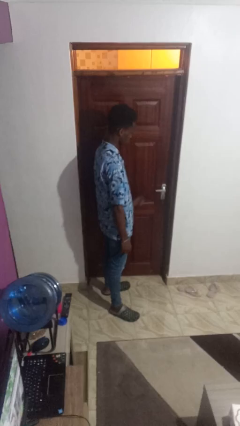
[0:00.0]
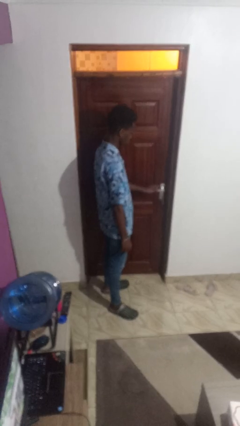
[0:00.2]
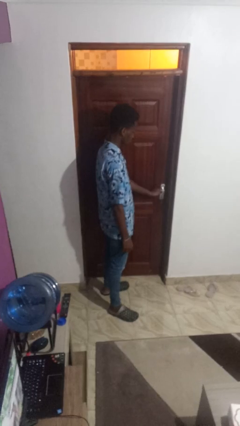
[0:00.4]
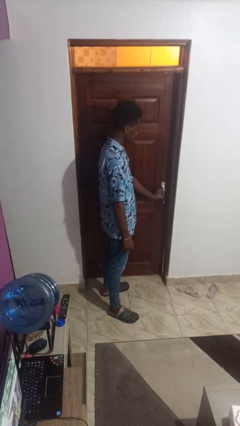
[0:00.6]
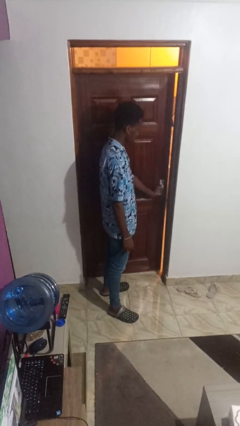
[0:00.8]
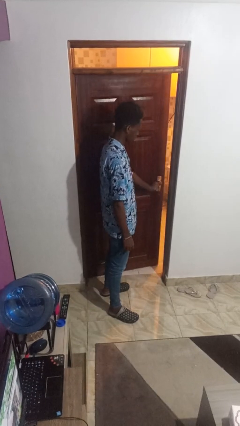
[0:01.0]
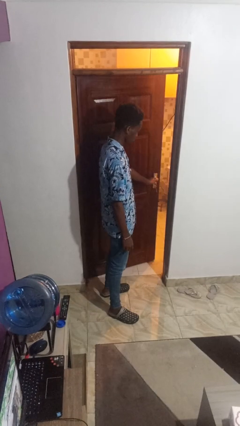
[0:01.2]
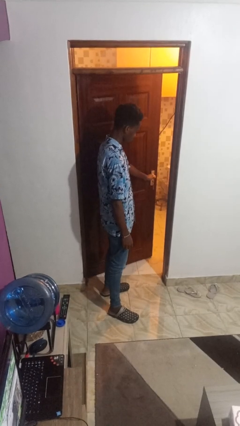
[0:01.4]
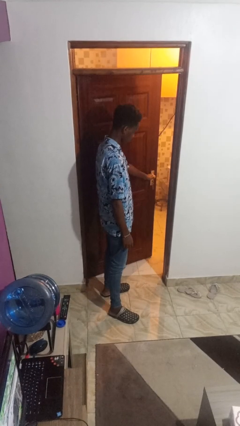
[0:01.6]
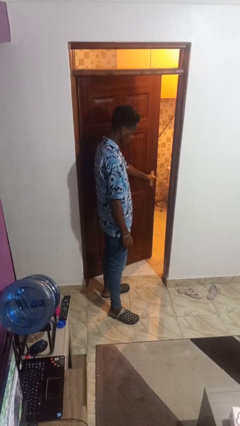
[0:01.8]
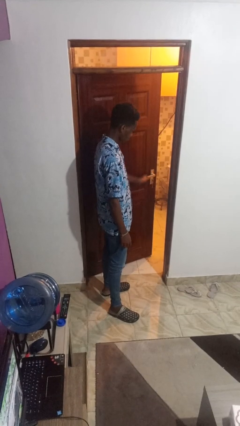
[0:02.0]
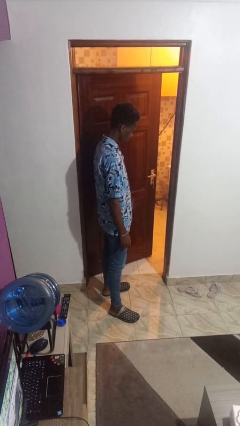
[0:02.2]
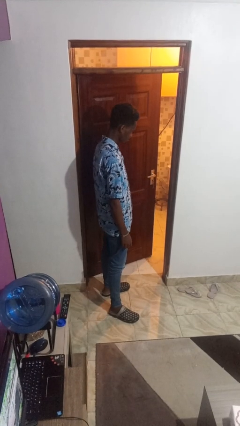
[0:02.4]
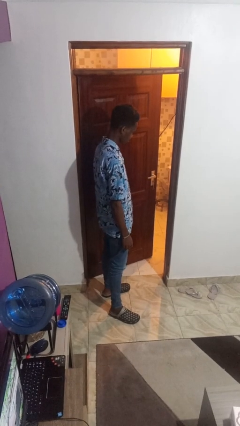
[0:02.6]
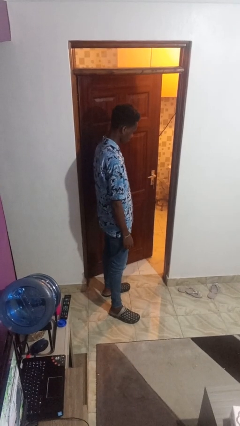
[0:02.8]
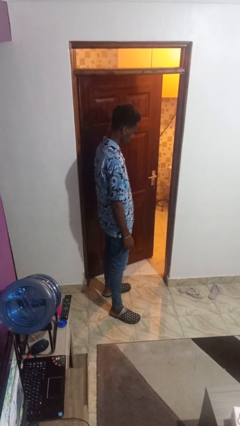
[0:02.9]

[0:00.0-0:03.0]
person opens facility door

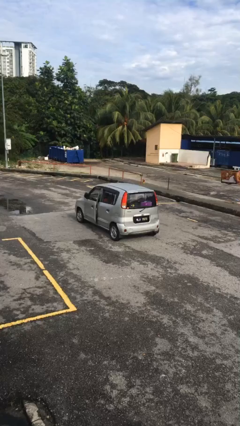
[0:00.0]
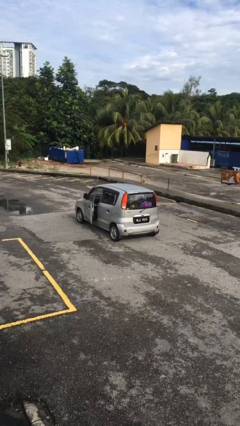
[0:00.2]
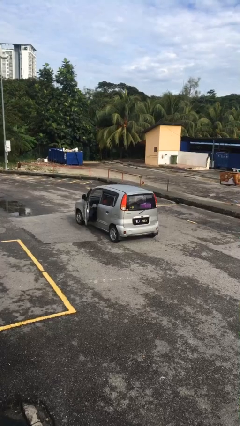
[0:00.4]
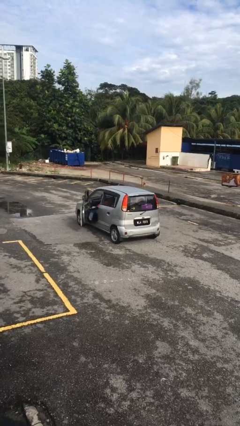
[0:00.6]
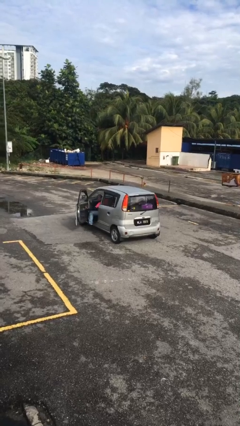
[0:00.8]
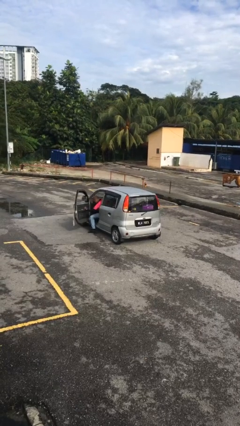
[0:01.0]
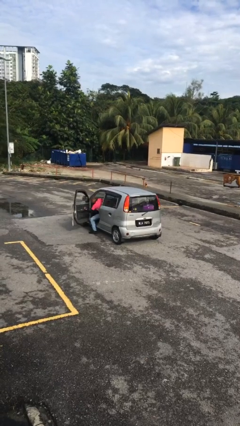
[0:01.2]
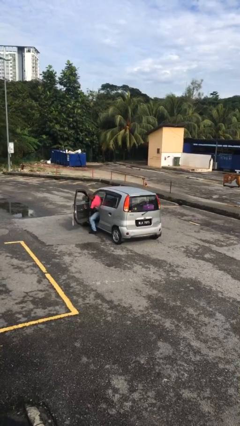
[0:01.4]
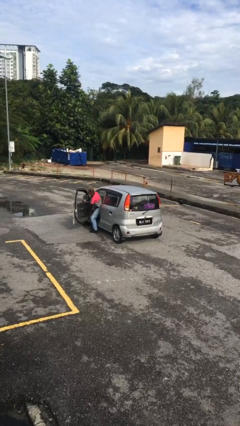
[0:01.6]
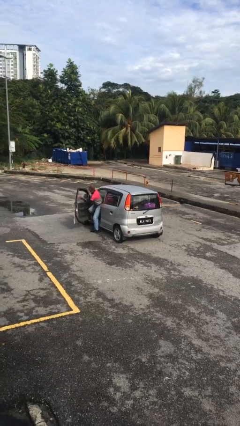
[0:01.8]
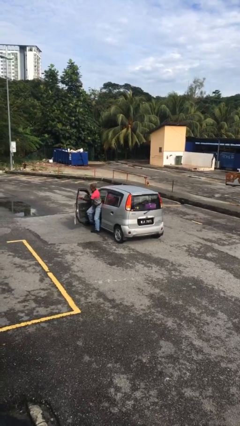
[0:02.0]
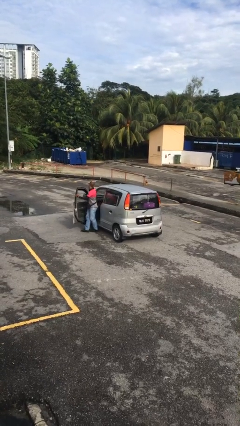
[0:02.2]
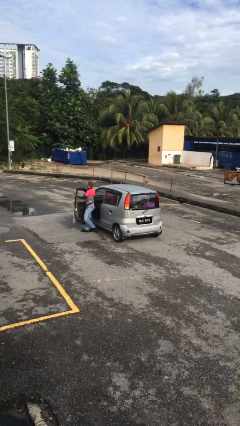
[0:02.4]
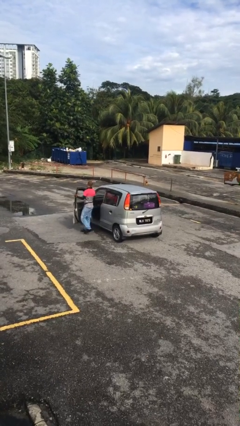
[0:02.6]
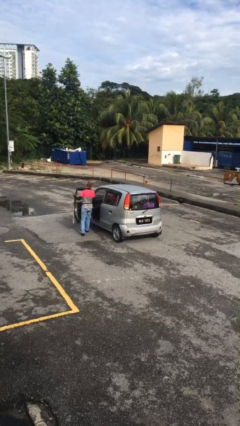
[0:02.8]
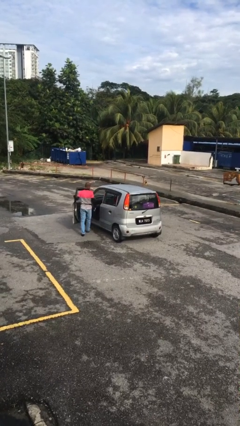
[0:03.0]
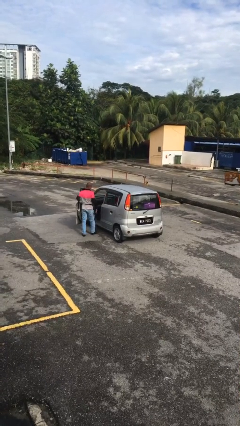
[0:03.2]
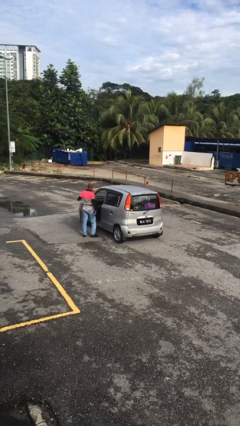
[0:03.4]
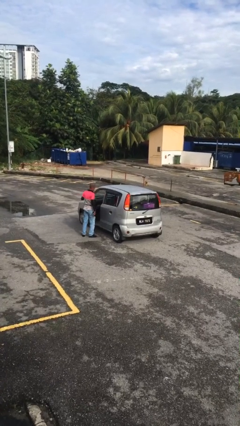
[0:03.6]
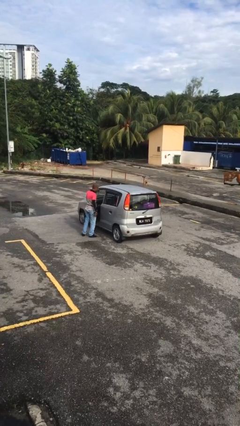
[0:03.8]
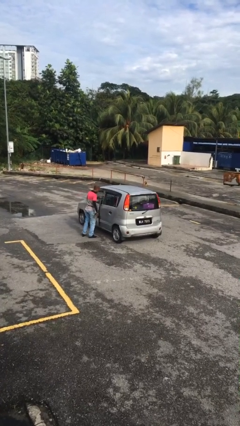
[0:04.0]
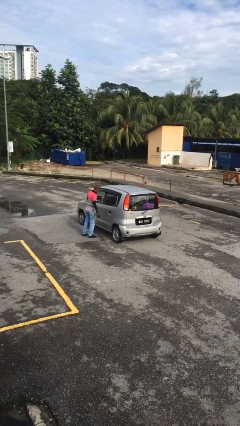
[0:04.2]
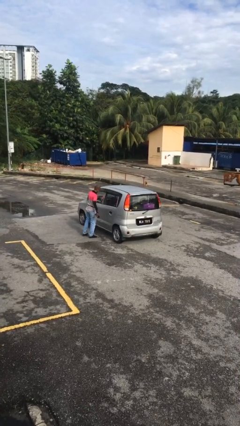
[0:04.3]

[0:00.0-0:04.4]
car drops off person

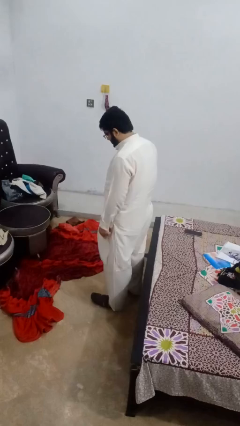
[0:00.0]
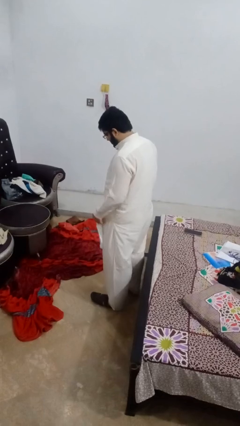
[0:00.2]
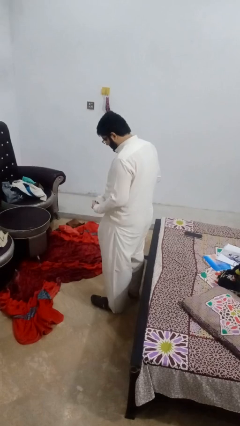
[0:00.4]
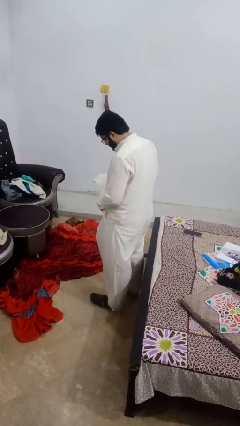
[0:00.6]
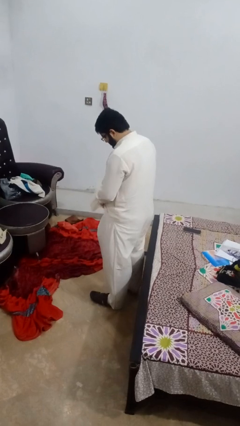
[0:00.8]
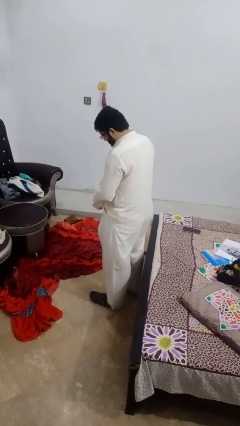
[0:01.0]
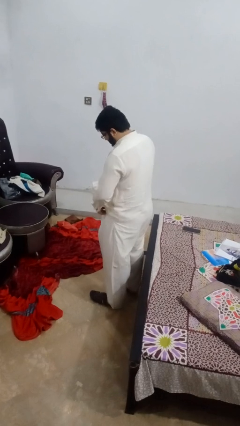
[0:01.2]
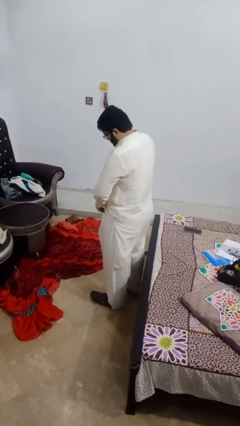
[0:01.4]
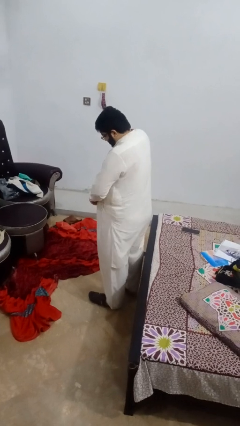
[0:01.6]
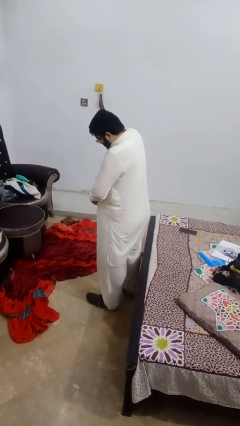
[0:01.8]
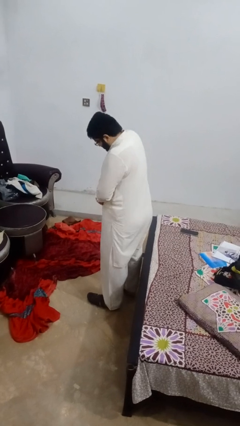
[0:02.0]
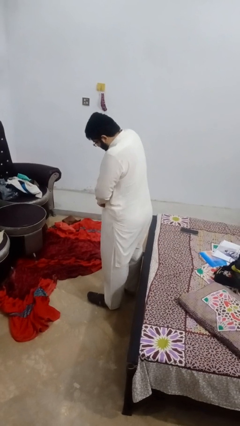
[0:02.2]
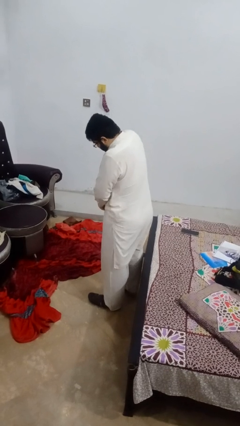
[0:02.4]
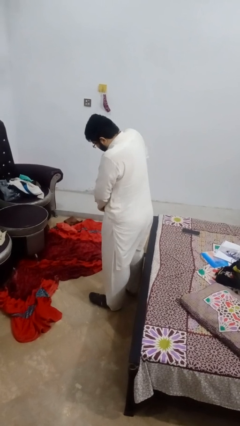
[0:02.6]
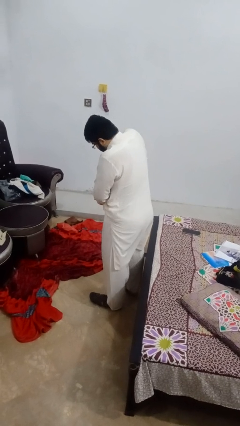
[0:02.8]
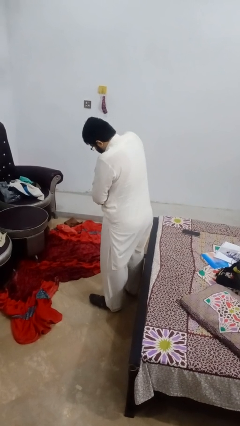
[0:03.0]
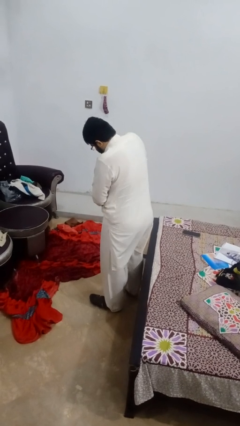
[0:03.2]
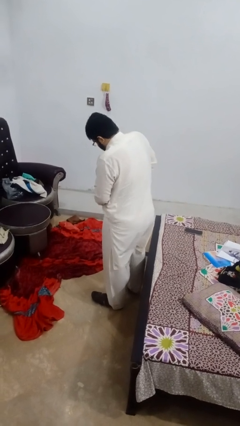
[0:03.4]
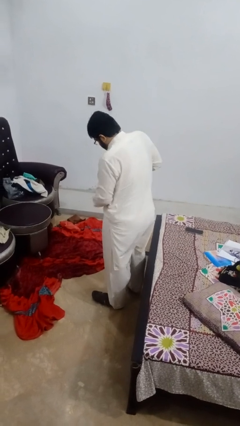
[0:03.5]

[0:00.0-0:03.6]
person tucks in shirt

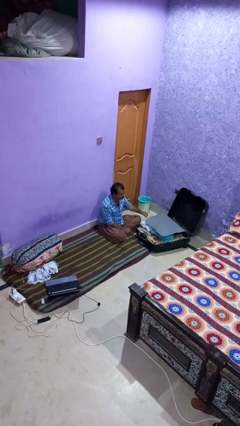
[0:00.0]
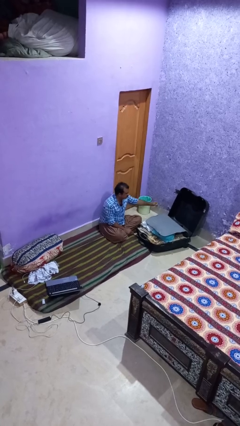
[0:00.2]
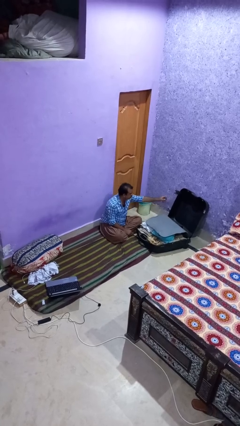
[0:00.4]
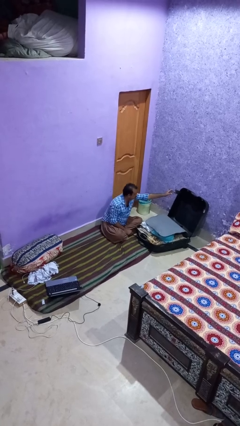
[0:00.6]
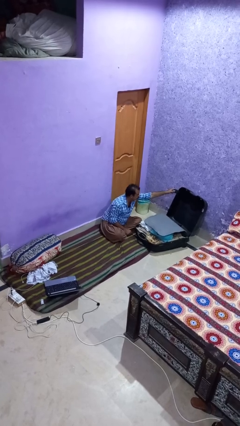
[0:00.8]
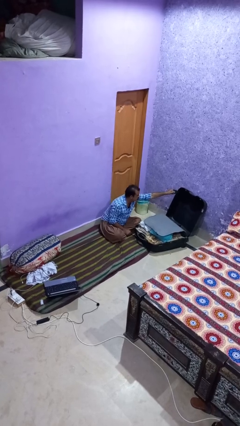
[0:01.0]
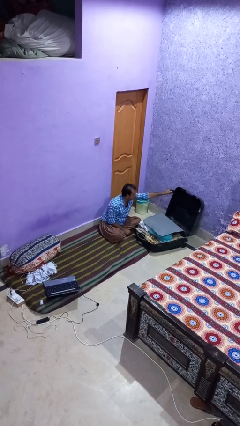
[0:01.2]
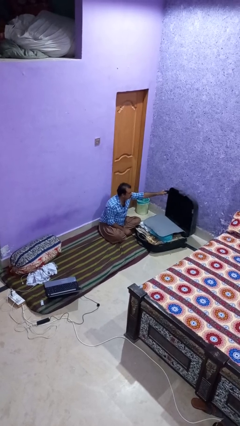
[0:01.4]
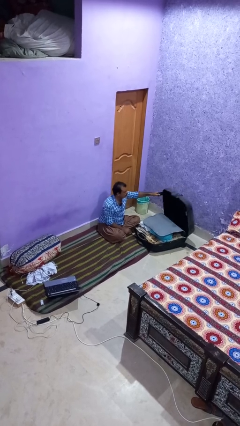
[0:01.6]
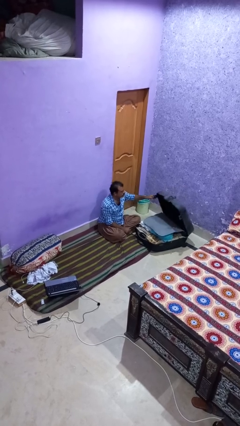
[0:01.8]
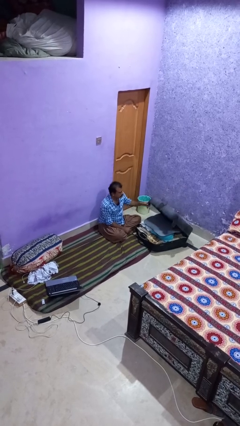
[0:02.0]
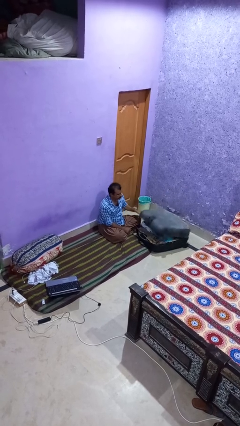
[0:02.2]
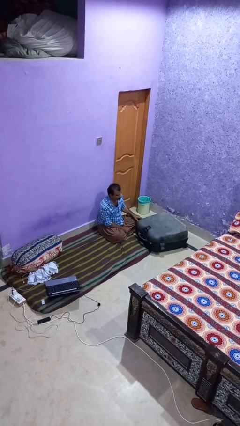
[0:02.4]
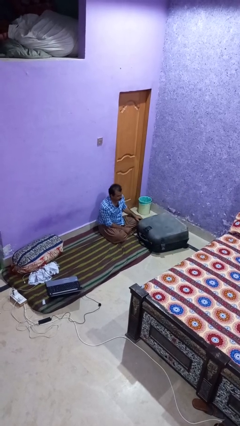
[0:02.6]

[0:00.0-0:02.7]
person closes suitcase

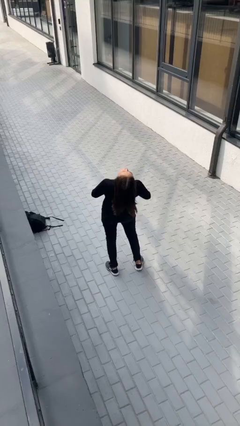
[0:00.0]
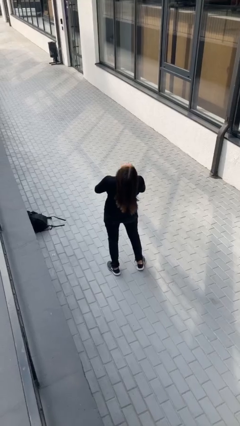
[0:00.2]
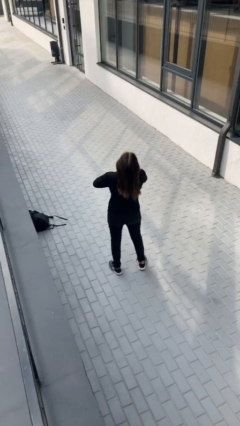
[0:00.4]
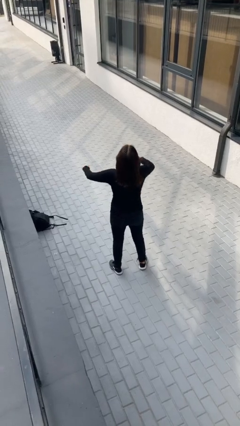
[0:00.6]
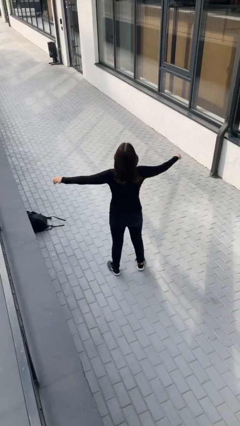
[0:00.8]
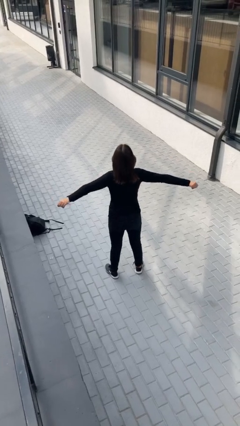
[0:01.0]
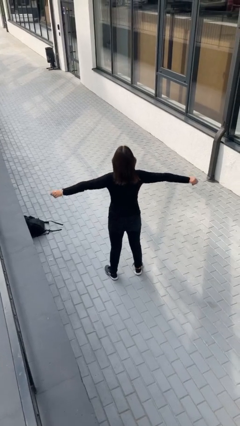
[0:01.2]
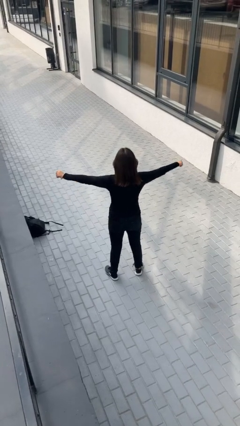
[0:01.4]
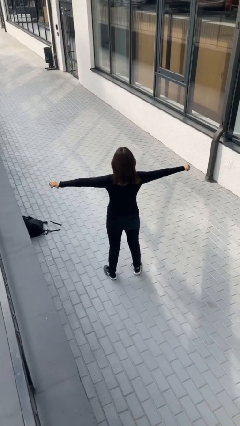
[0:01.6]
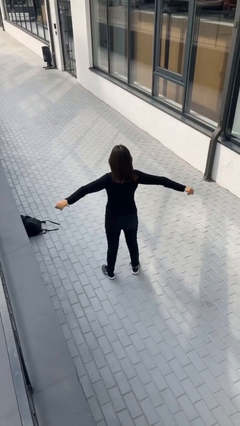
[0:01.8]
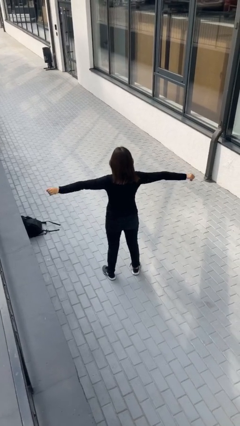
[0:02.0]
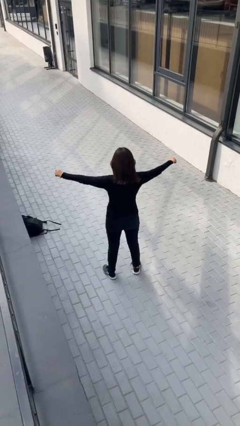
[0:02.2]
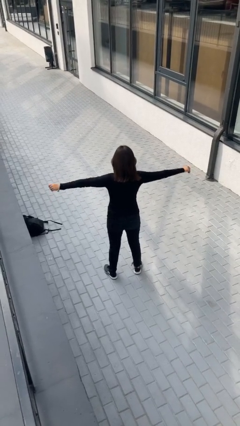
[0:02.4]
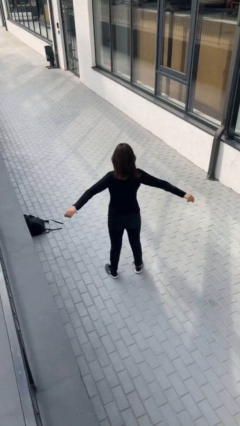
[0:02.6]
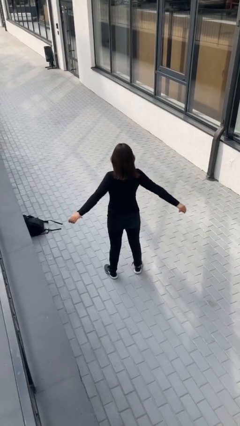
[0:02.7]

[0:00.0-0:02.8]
person stretches arms to side

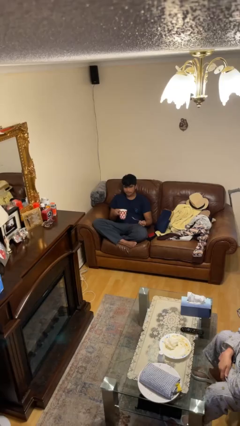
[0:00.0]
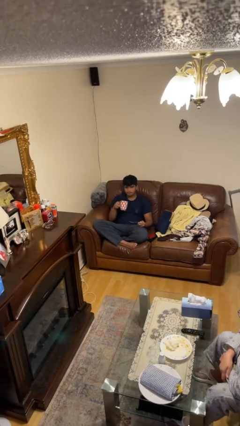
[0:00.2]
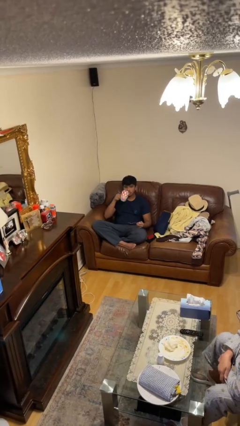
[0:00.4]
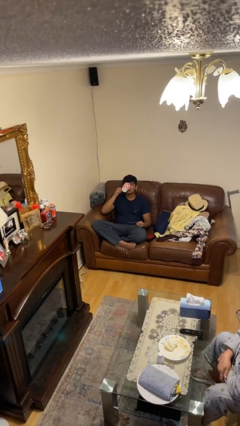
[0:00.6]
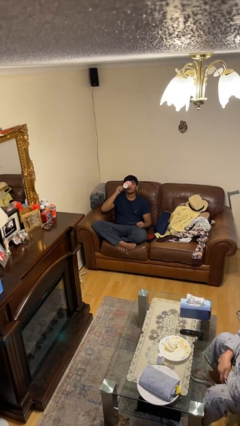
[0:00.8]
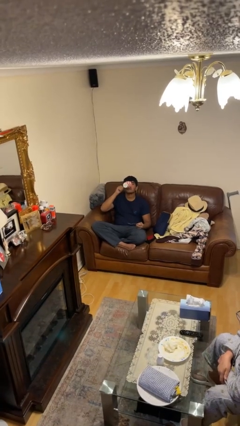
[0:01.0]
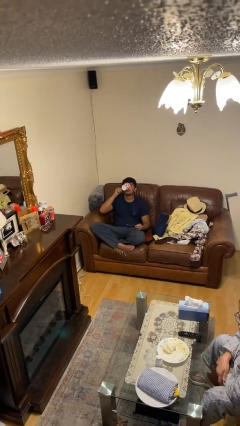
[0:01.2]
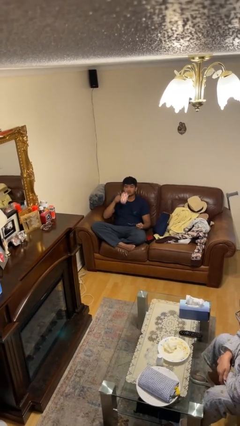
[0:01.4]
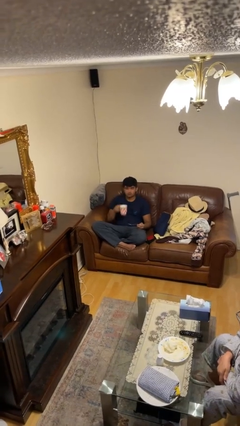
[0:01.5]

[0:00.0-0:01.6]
person drinks from mug
